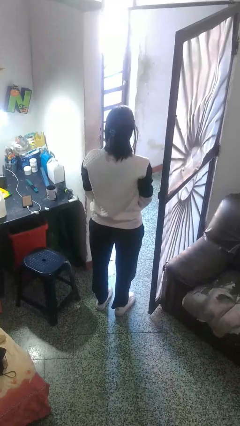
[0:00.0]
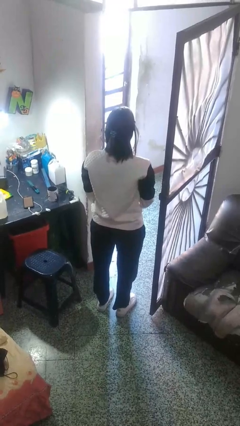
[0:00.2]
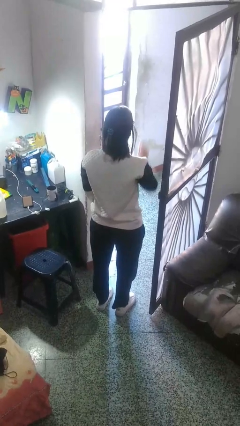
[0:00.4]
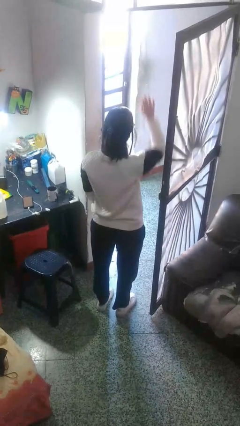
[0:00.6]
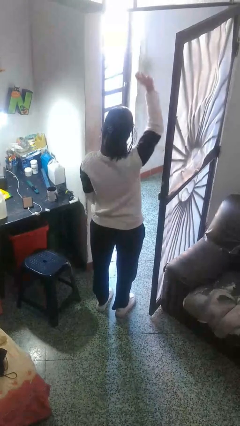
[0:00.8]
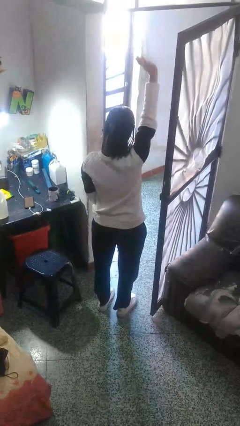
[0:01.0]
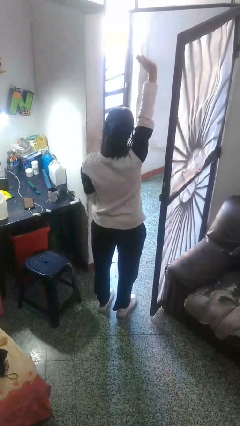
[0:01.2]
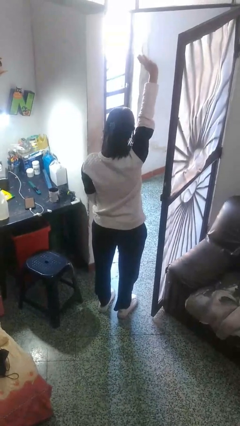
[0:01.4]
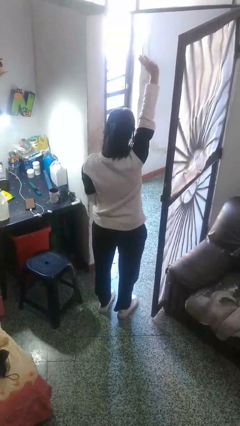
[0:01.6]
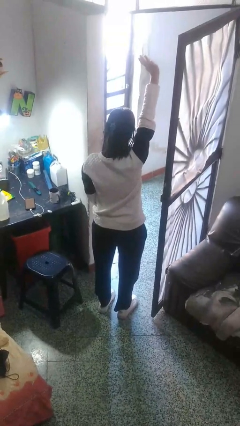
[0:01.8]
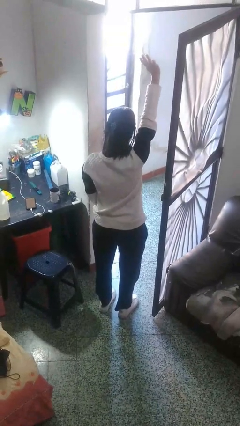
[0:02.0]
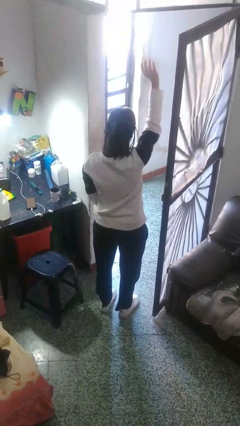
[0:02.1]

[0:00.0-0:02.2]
person gestures raise hand

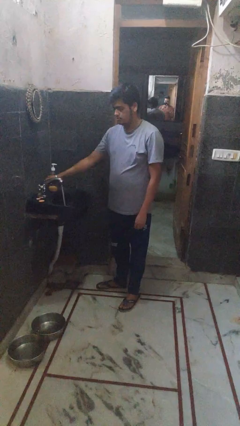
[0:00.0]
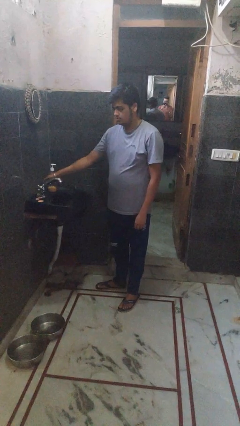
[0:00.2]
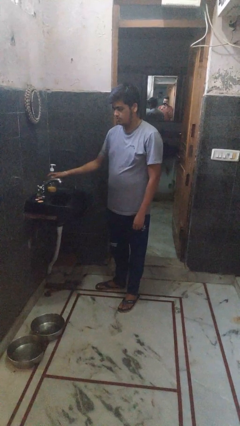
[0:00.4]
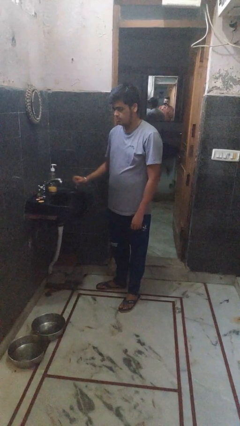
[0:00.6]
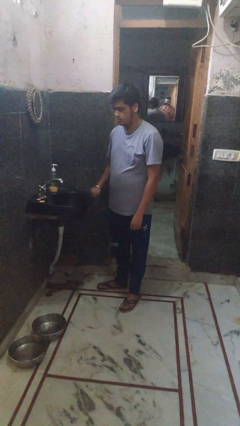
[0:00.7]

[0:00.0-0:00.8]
person turns off faucet

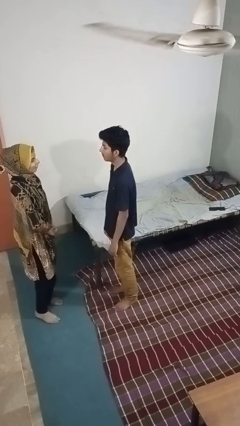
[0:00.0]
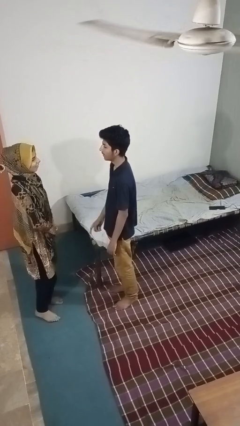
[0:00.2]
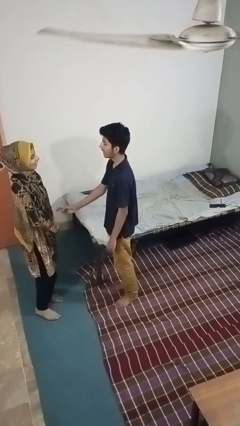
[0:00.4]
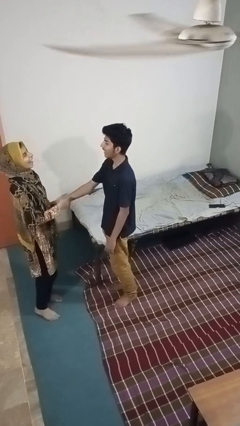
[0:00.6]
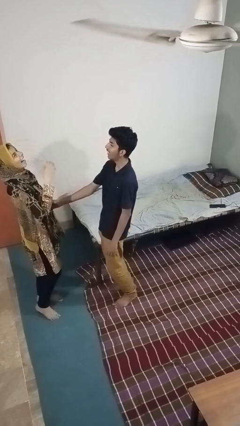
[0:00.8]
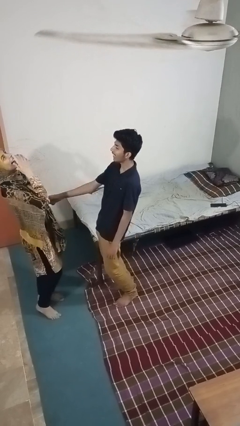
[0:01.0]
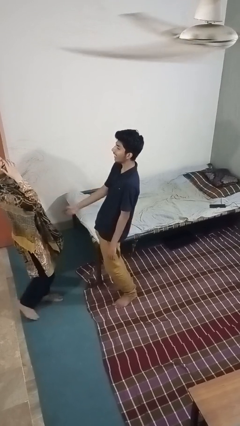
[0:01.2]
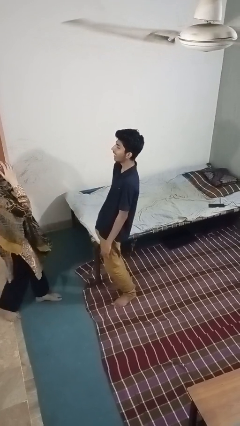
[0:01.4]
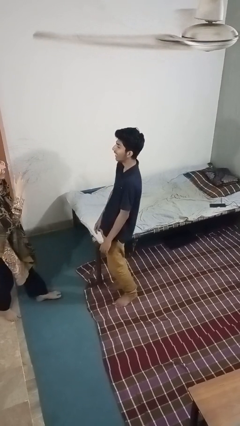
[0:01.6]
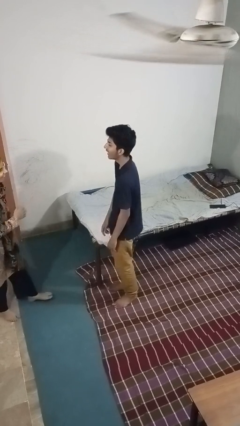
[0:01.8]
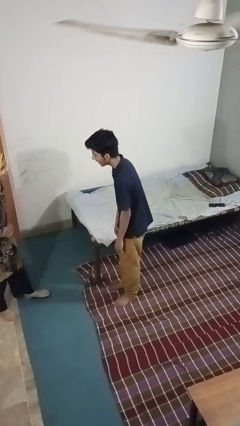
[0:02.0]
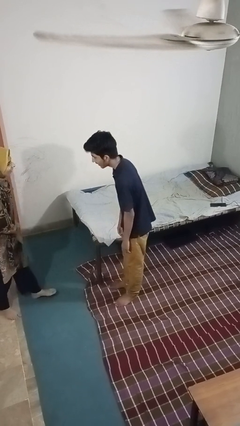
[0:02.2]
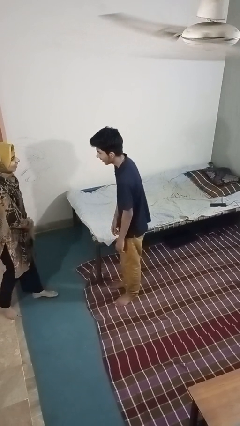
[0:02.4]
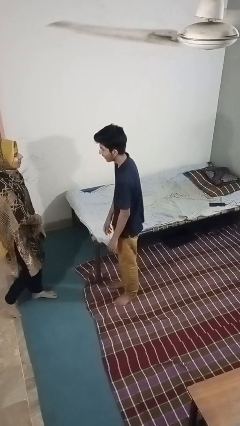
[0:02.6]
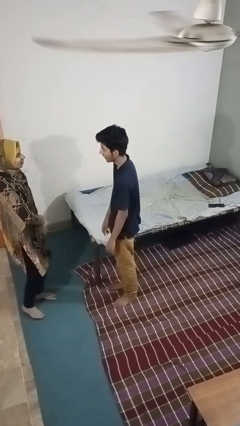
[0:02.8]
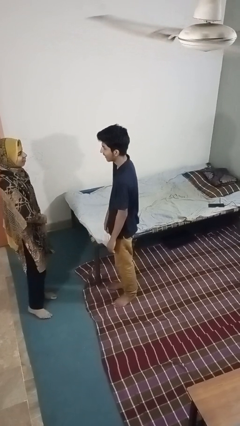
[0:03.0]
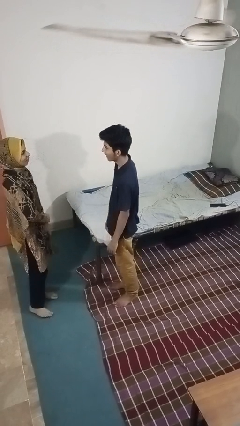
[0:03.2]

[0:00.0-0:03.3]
person laughs with person

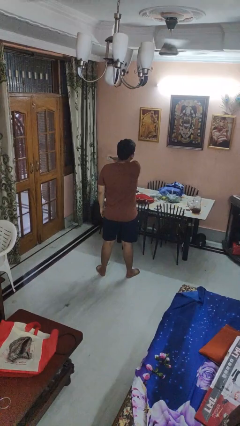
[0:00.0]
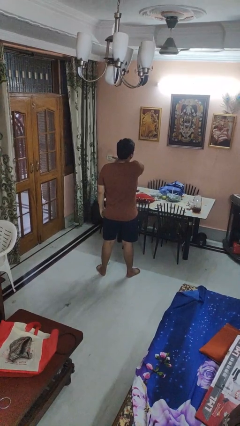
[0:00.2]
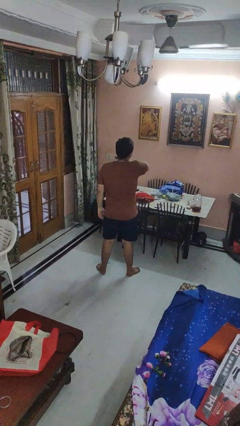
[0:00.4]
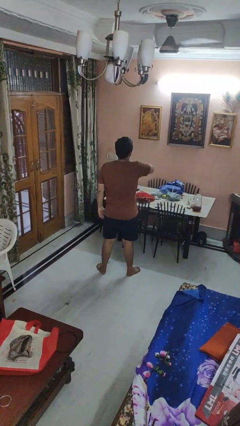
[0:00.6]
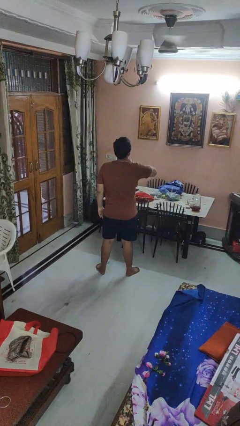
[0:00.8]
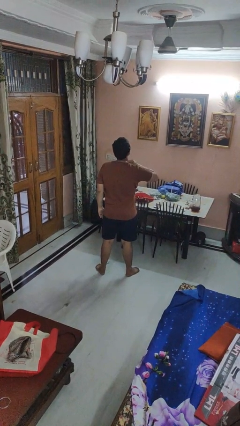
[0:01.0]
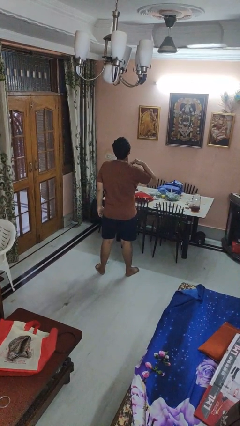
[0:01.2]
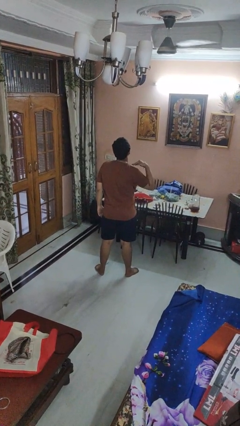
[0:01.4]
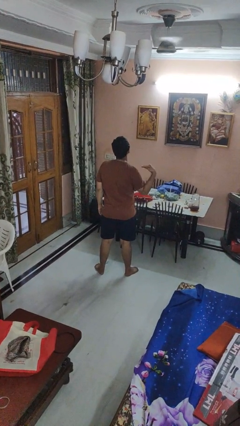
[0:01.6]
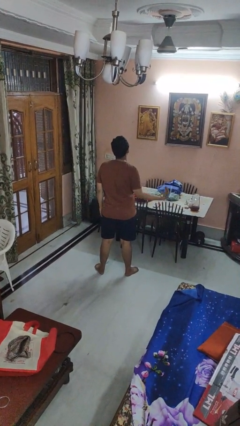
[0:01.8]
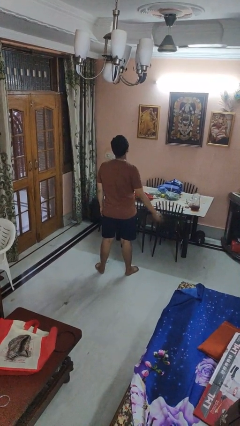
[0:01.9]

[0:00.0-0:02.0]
person gestures cut

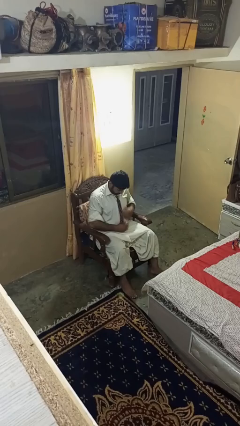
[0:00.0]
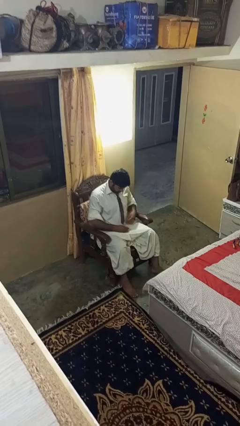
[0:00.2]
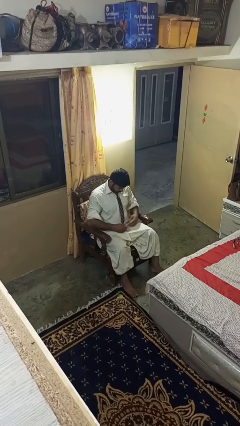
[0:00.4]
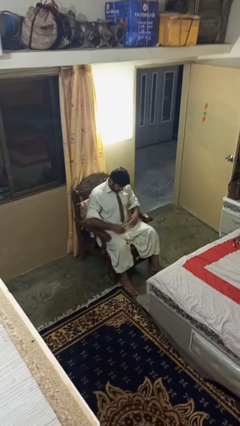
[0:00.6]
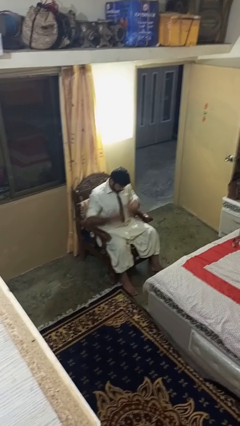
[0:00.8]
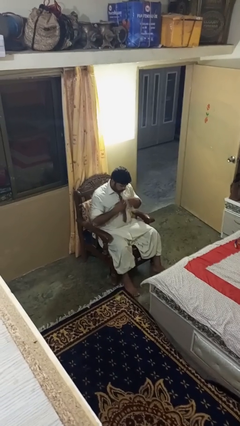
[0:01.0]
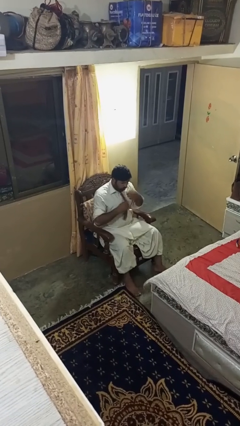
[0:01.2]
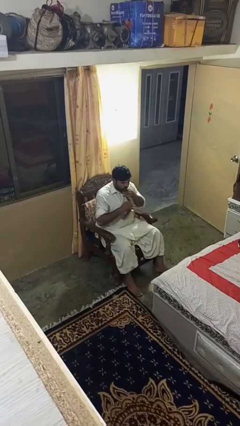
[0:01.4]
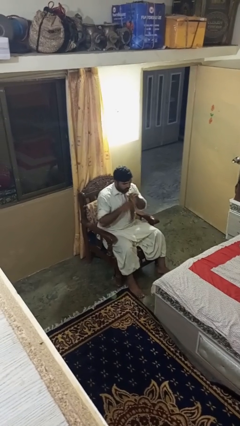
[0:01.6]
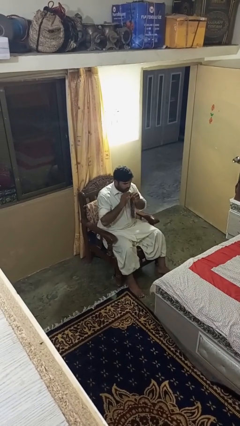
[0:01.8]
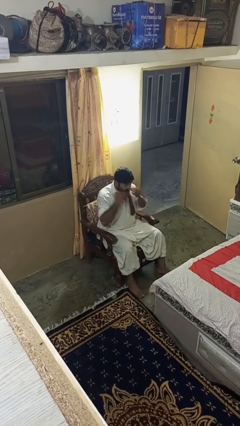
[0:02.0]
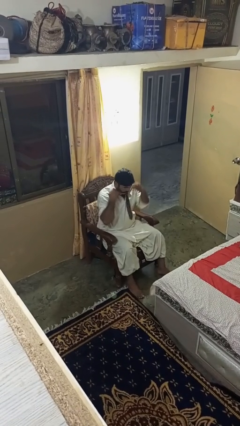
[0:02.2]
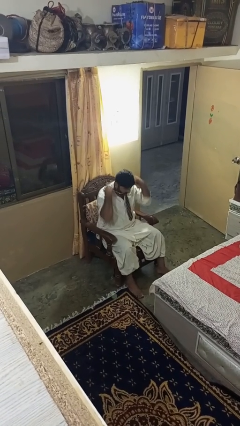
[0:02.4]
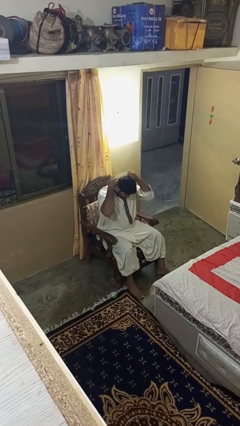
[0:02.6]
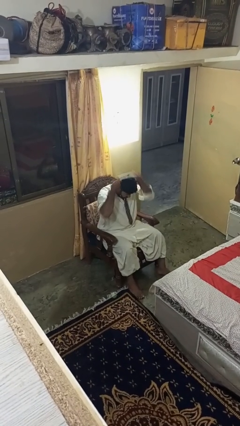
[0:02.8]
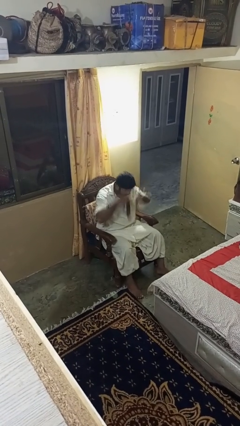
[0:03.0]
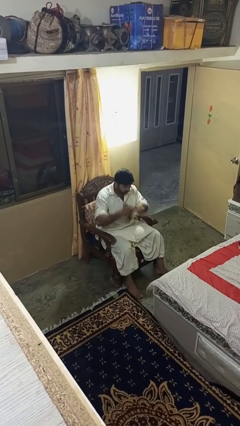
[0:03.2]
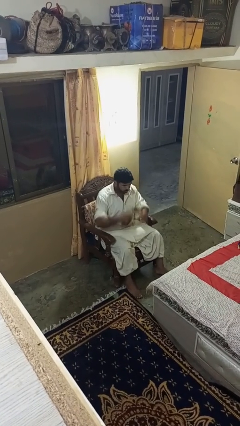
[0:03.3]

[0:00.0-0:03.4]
person takes off necktie

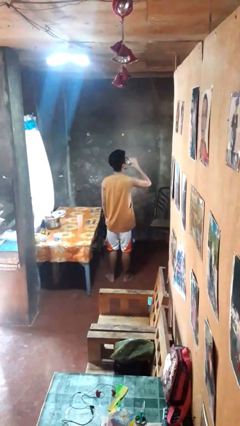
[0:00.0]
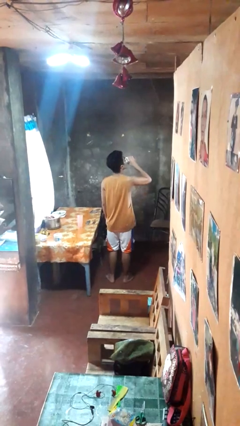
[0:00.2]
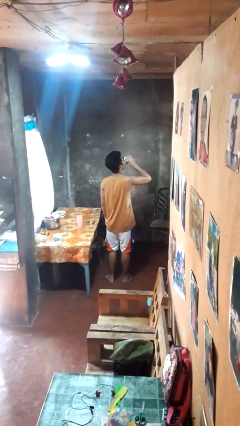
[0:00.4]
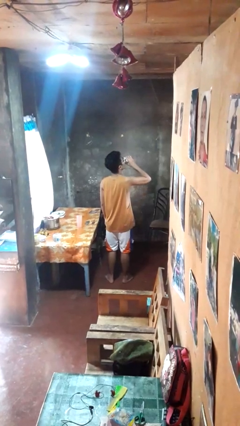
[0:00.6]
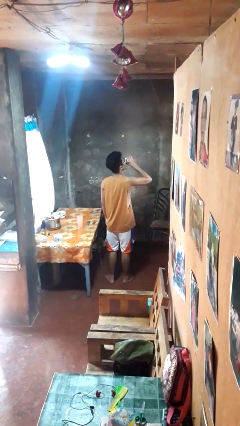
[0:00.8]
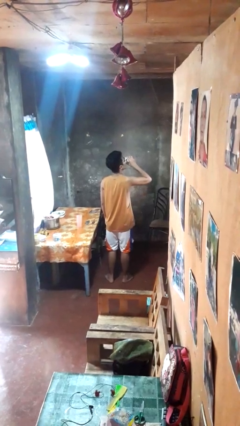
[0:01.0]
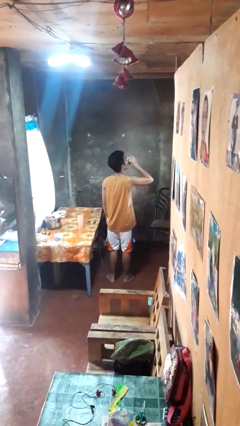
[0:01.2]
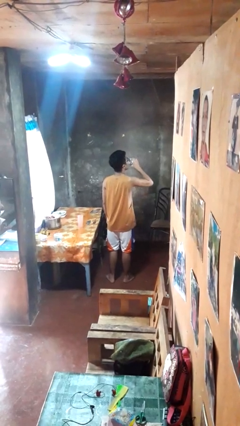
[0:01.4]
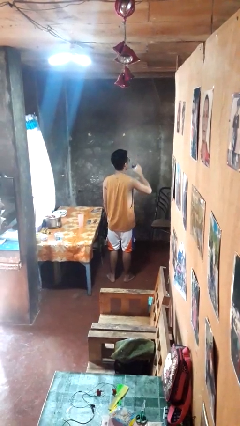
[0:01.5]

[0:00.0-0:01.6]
person drinks from beverage can

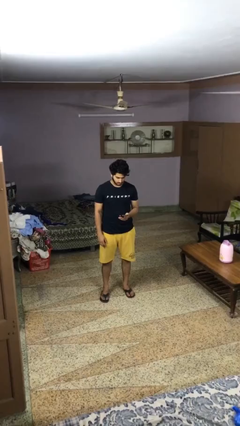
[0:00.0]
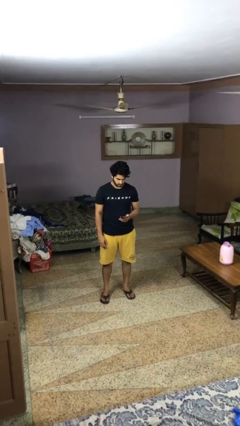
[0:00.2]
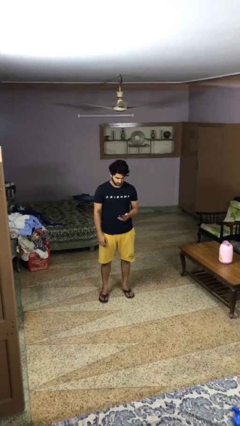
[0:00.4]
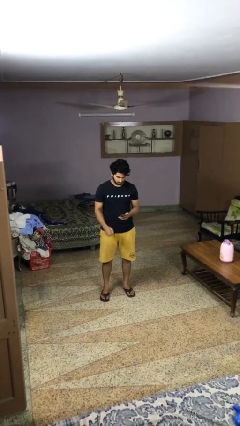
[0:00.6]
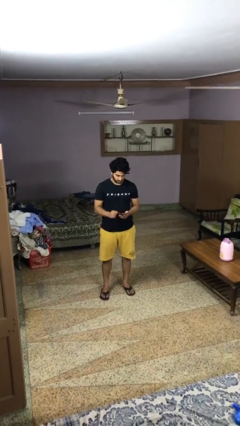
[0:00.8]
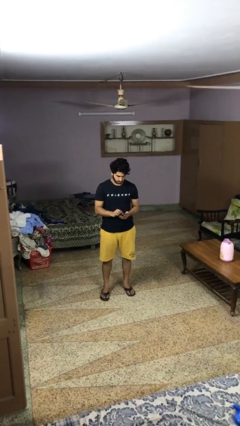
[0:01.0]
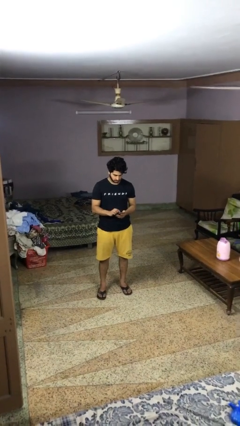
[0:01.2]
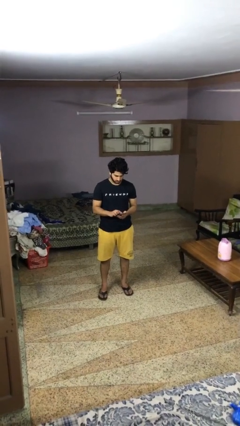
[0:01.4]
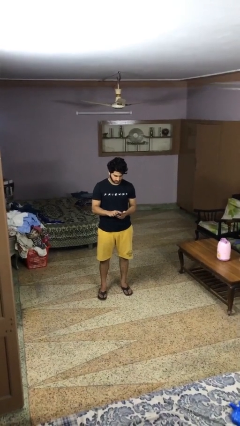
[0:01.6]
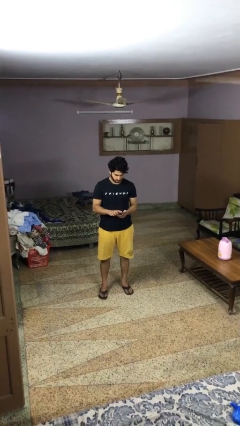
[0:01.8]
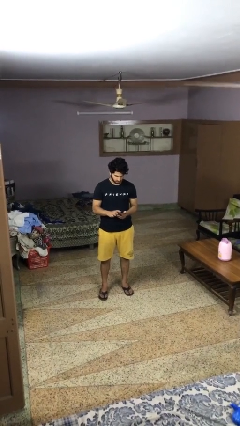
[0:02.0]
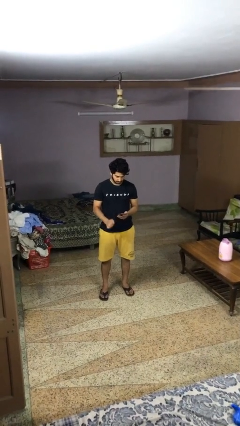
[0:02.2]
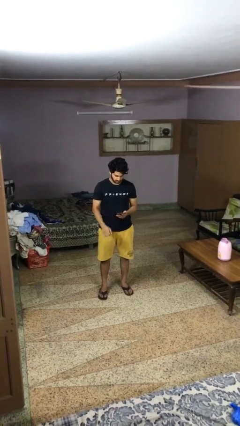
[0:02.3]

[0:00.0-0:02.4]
person gestures zoom in

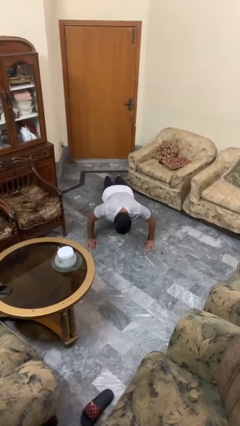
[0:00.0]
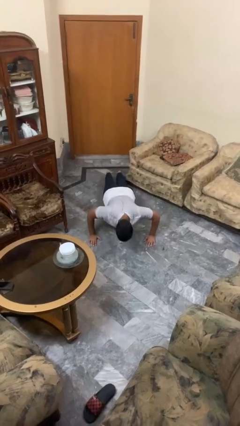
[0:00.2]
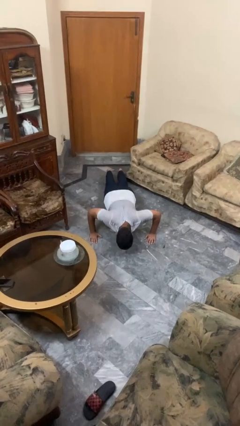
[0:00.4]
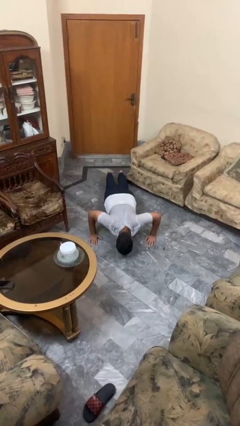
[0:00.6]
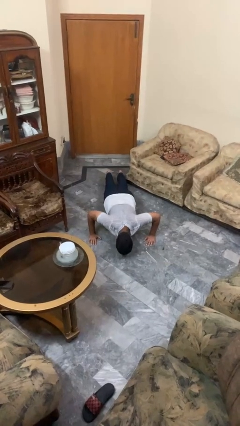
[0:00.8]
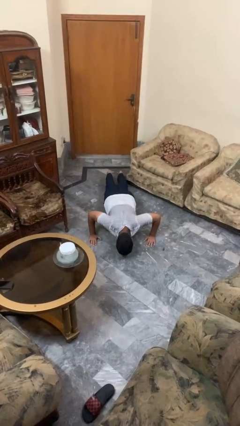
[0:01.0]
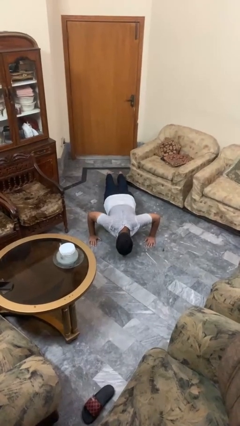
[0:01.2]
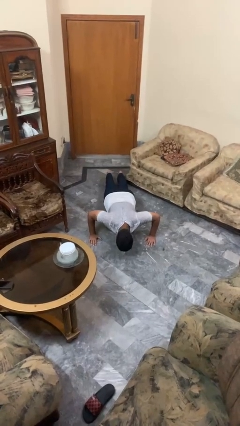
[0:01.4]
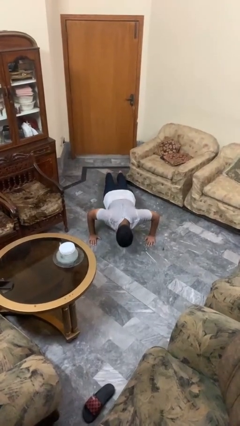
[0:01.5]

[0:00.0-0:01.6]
person exercises with pushup
